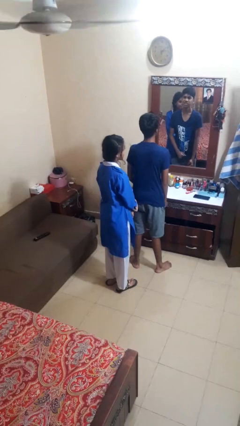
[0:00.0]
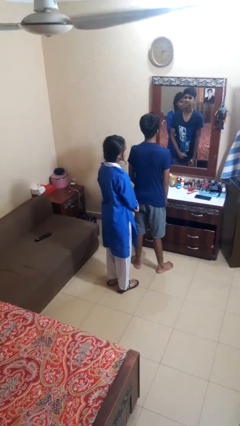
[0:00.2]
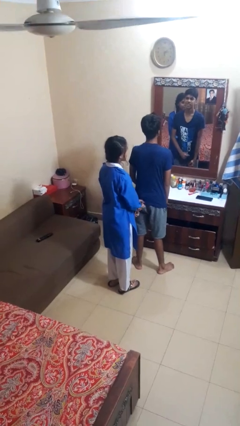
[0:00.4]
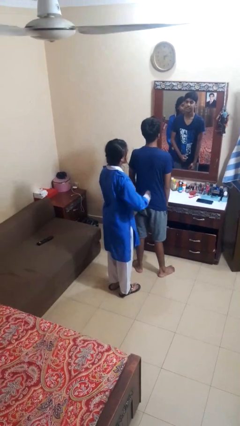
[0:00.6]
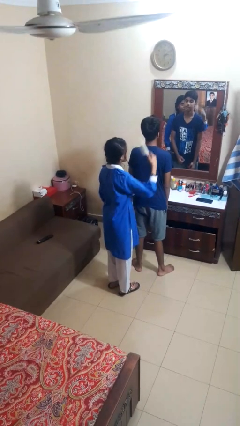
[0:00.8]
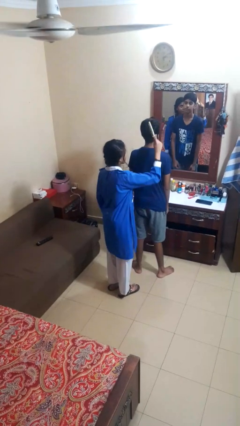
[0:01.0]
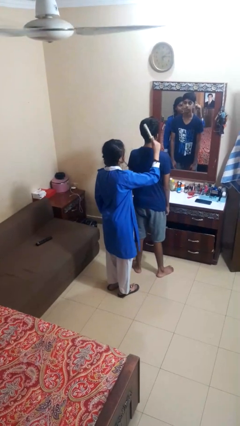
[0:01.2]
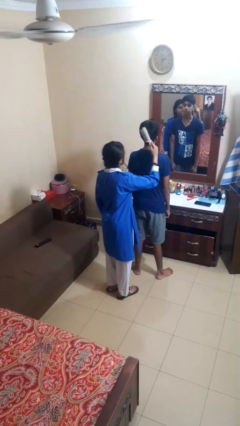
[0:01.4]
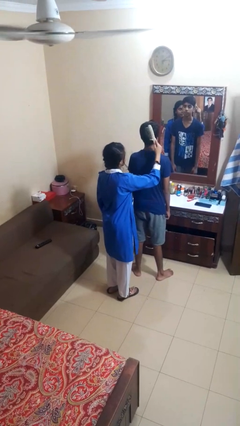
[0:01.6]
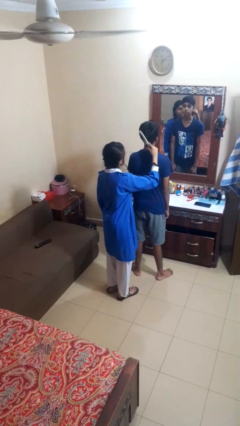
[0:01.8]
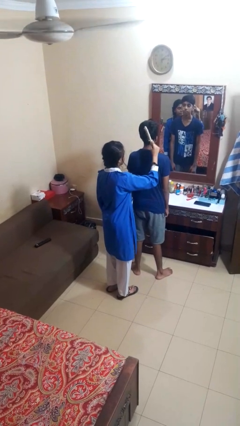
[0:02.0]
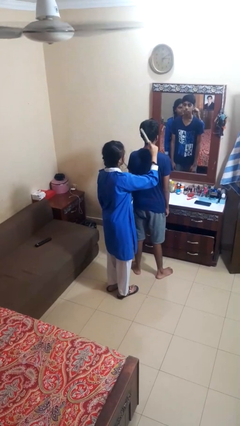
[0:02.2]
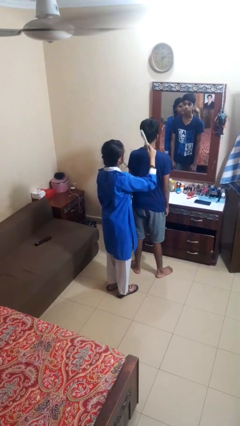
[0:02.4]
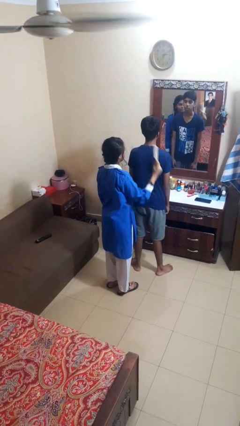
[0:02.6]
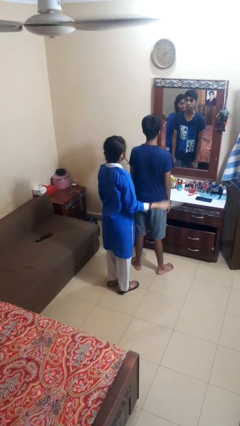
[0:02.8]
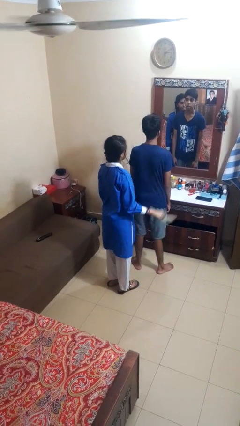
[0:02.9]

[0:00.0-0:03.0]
person brushes hair of person

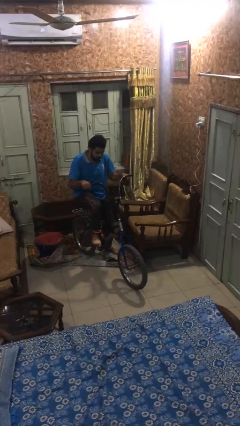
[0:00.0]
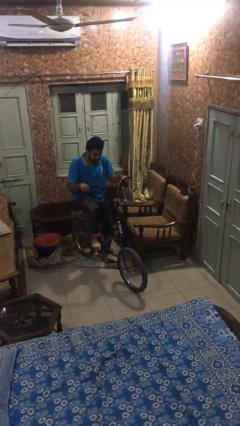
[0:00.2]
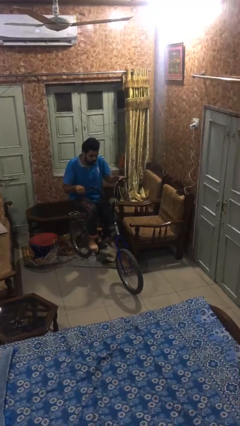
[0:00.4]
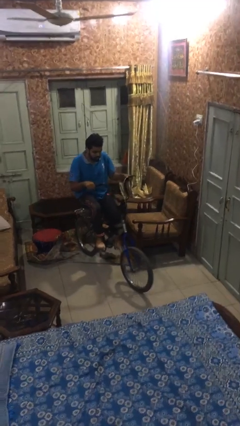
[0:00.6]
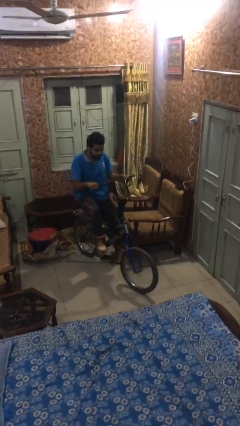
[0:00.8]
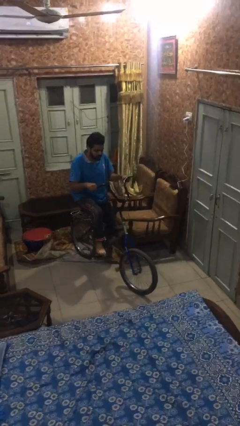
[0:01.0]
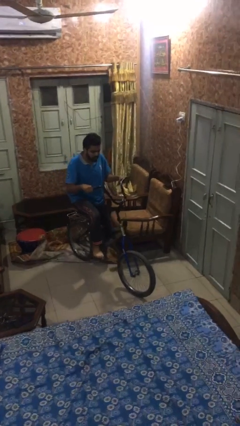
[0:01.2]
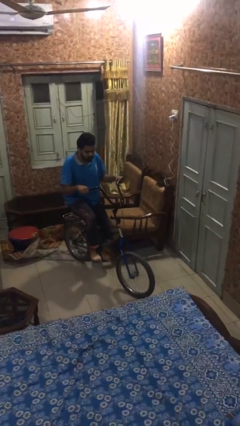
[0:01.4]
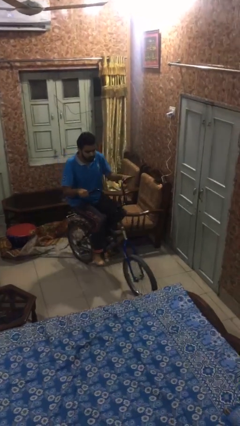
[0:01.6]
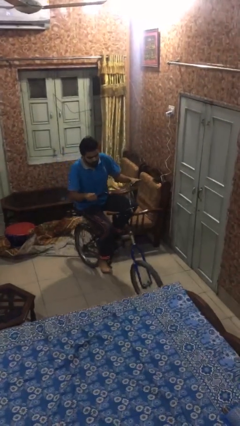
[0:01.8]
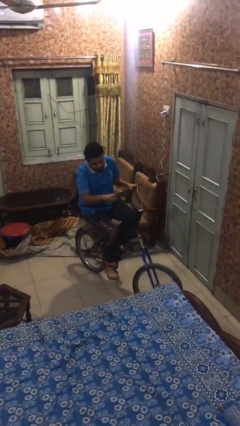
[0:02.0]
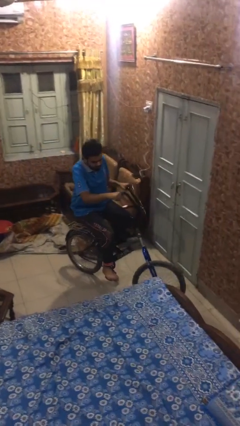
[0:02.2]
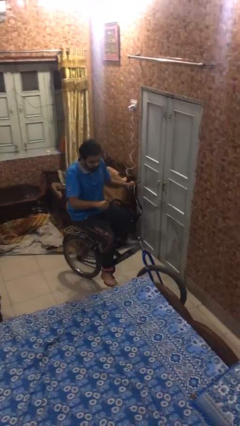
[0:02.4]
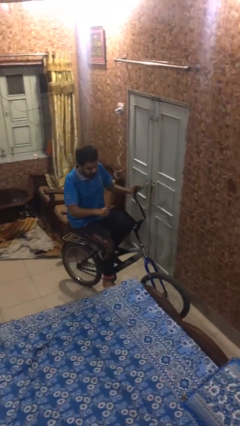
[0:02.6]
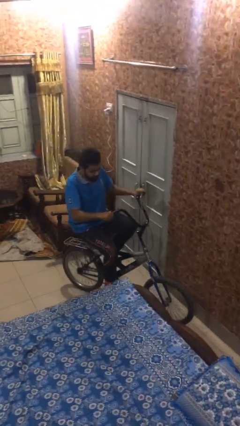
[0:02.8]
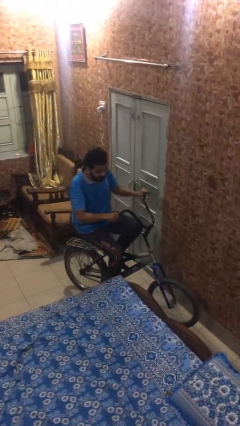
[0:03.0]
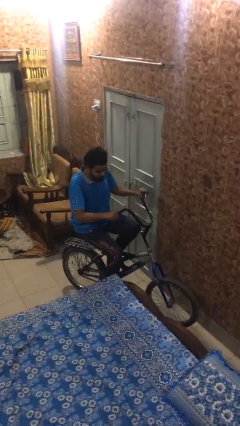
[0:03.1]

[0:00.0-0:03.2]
person rides bicycle

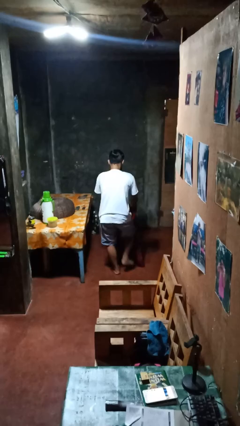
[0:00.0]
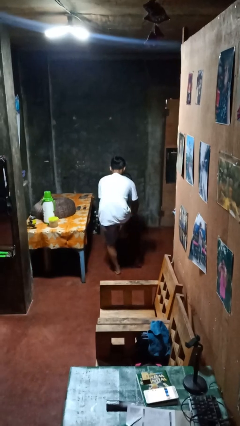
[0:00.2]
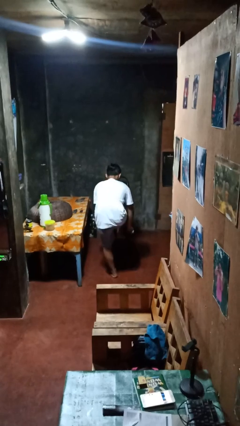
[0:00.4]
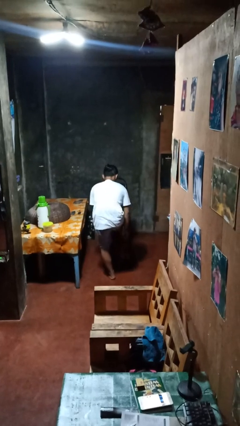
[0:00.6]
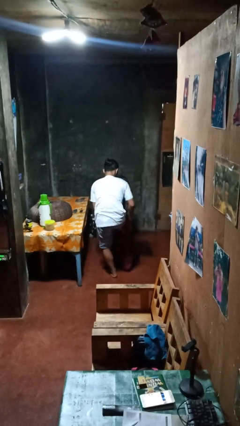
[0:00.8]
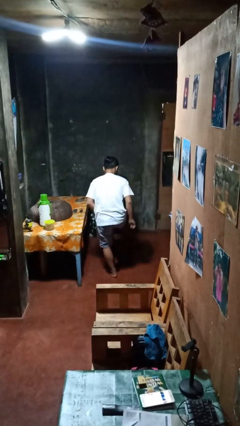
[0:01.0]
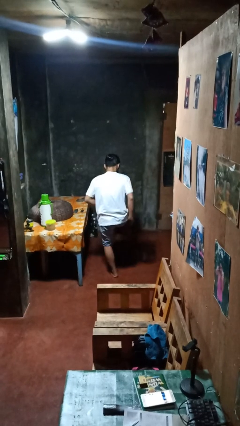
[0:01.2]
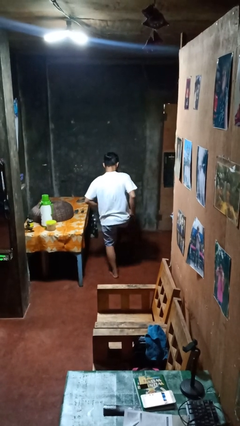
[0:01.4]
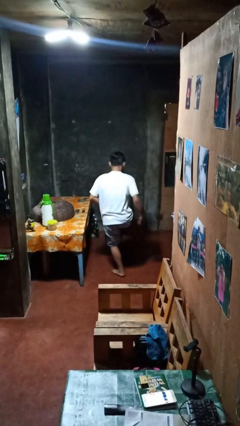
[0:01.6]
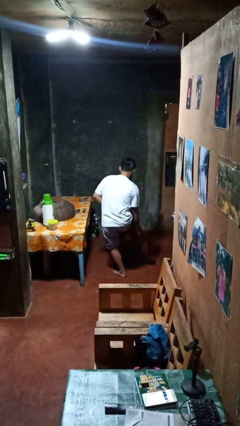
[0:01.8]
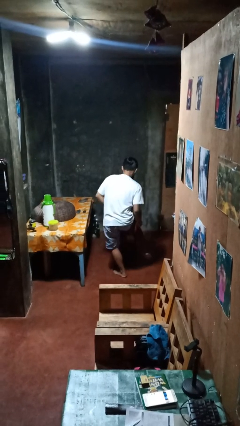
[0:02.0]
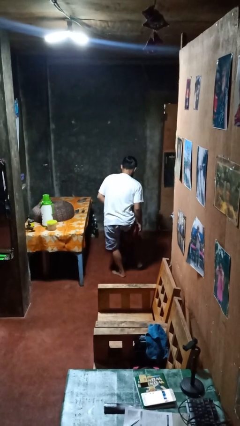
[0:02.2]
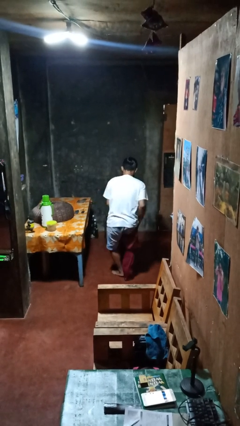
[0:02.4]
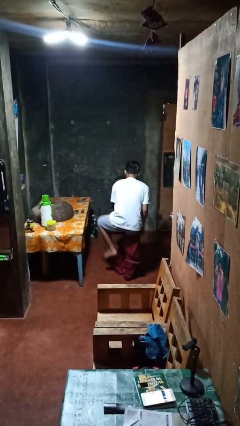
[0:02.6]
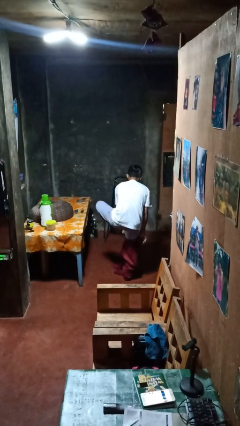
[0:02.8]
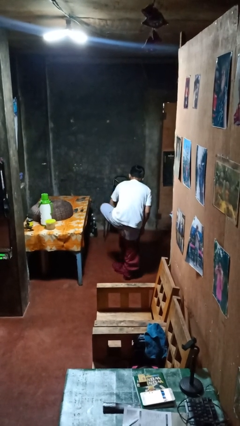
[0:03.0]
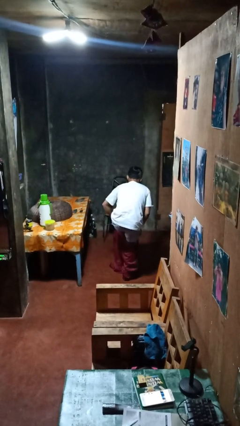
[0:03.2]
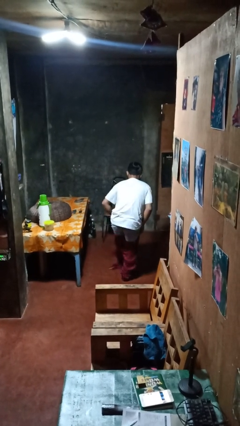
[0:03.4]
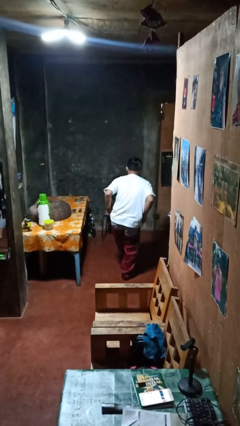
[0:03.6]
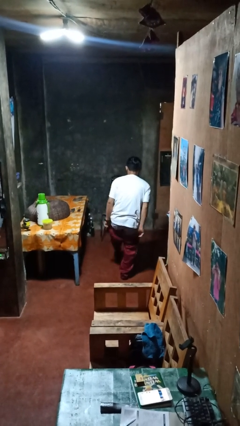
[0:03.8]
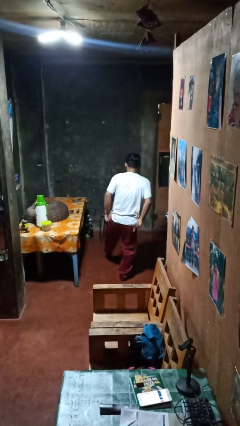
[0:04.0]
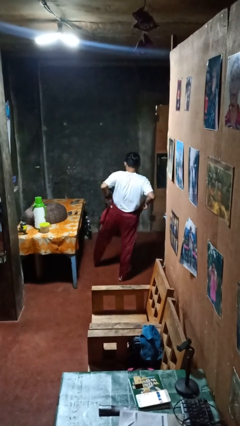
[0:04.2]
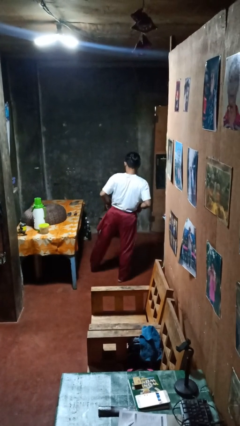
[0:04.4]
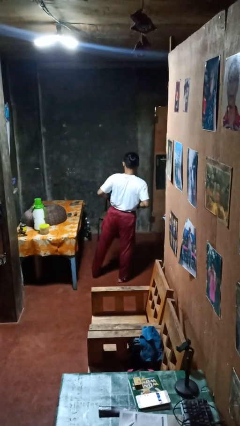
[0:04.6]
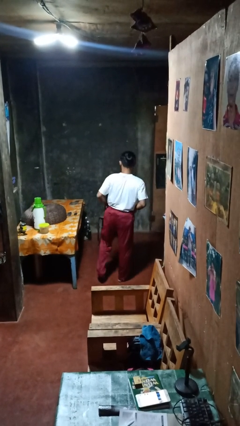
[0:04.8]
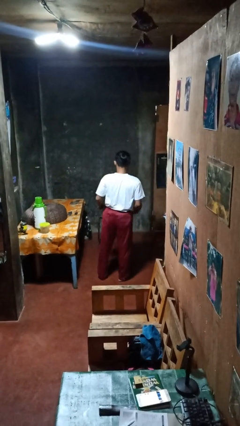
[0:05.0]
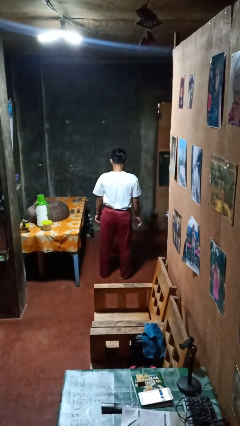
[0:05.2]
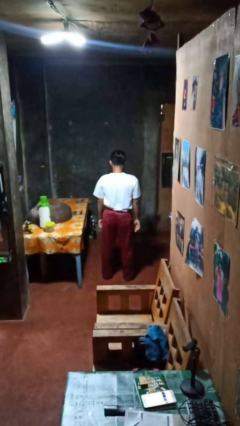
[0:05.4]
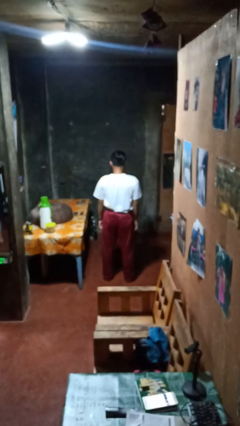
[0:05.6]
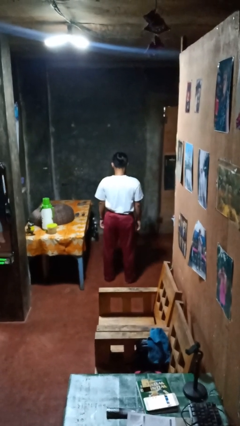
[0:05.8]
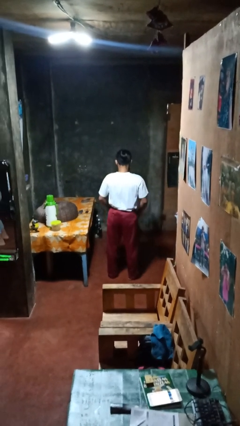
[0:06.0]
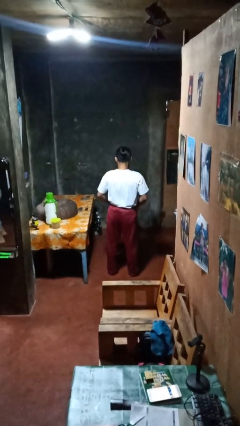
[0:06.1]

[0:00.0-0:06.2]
person puts on pants

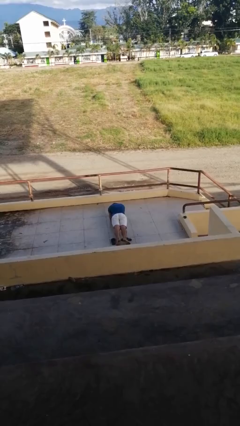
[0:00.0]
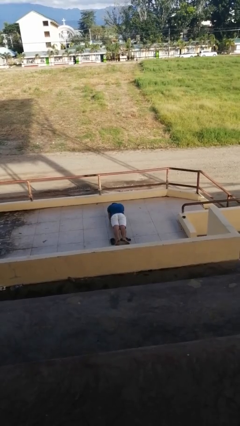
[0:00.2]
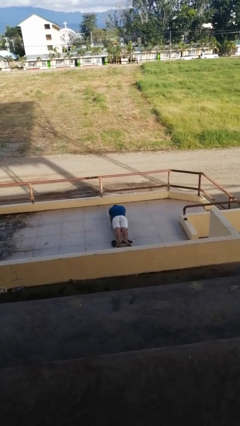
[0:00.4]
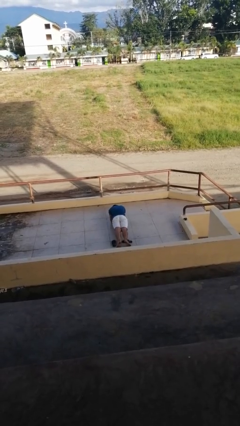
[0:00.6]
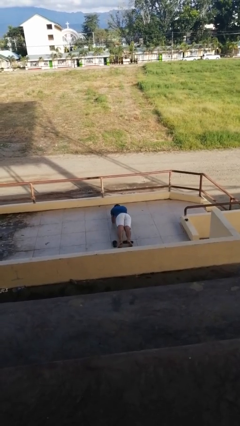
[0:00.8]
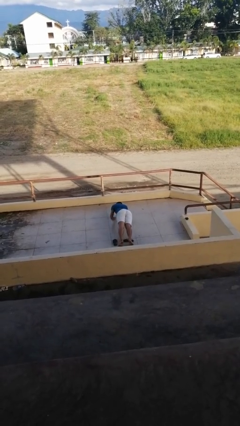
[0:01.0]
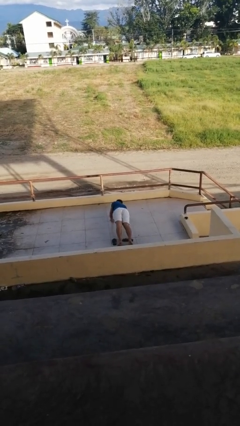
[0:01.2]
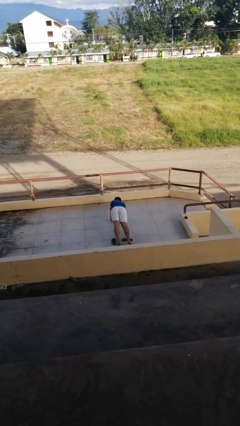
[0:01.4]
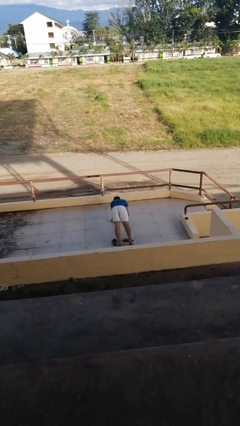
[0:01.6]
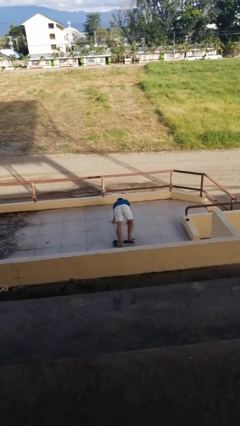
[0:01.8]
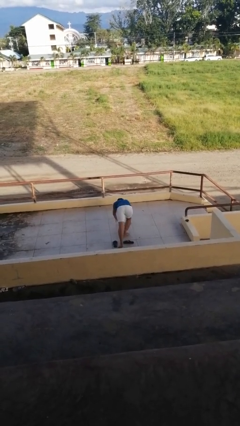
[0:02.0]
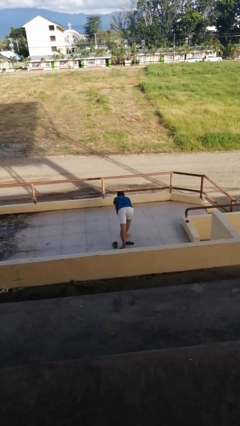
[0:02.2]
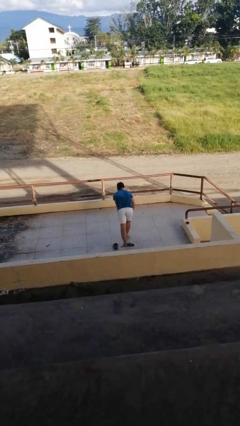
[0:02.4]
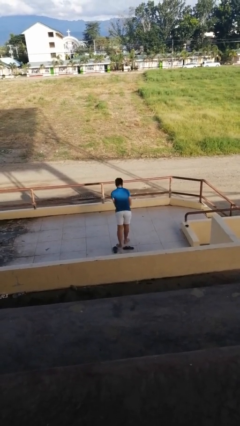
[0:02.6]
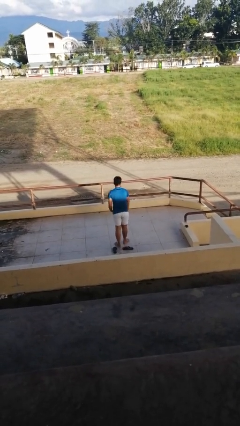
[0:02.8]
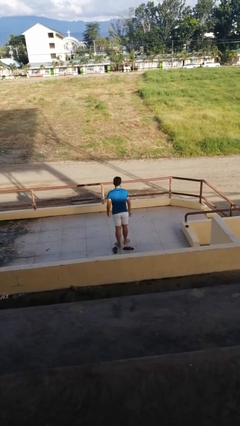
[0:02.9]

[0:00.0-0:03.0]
person stands up from floor

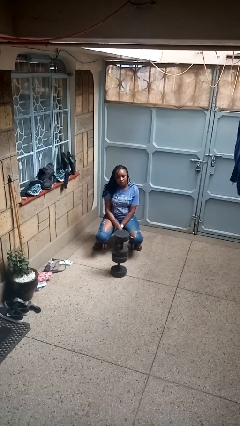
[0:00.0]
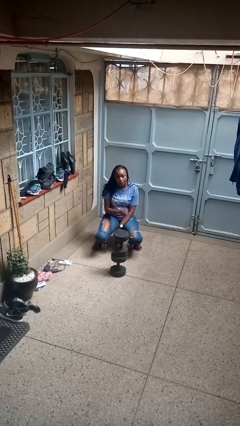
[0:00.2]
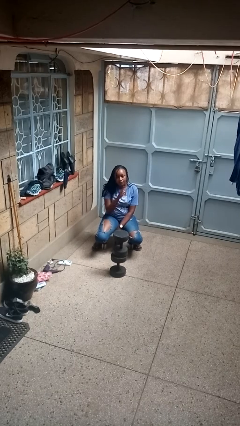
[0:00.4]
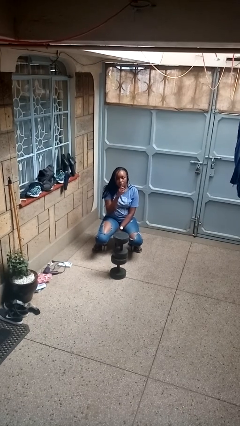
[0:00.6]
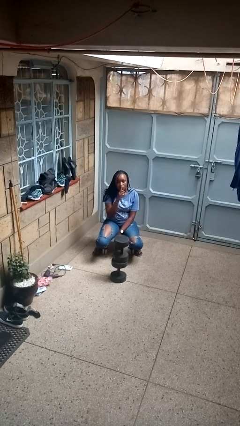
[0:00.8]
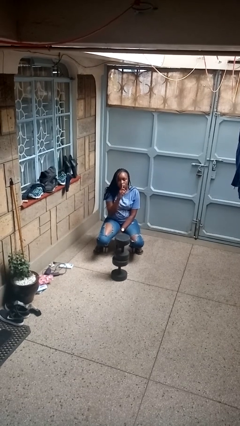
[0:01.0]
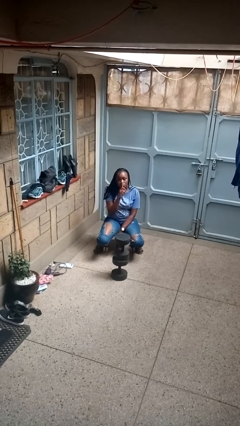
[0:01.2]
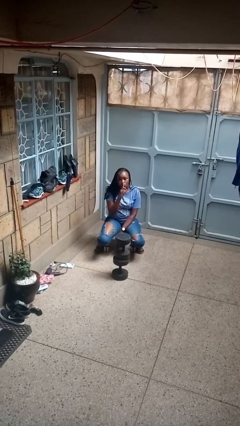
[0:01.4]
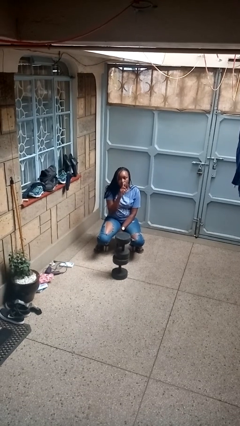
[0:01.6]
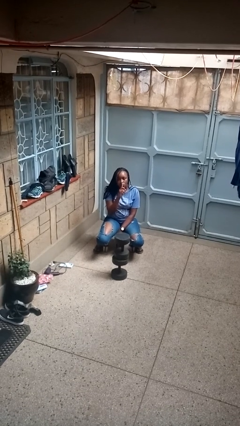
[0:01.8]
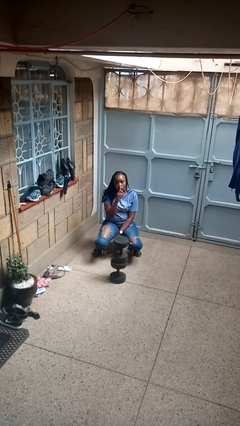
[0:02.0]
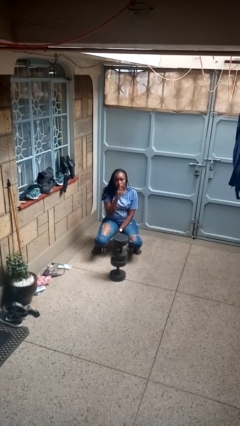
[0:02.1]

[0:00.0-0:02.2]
person gestures be quiet
